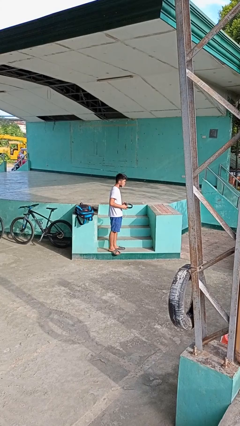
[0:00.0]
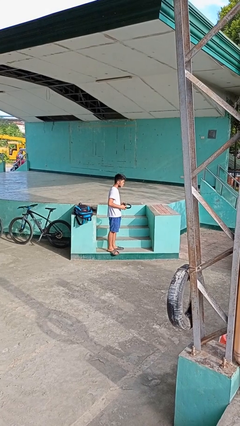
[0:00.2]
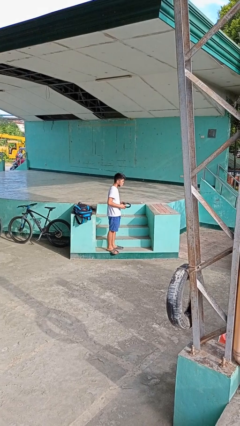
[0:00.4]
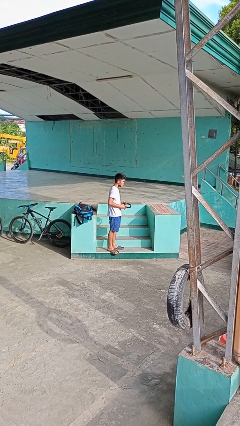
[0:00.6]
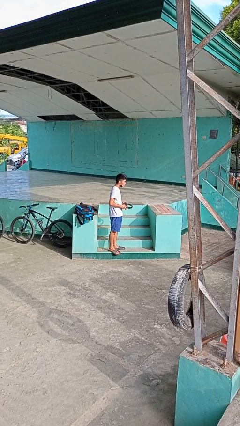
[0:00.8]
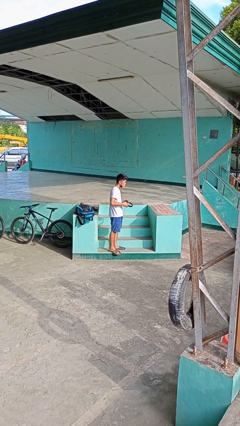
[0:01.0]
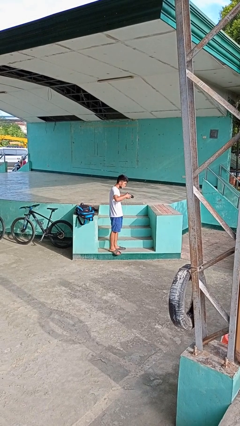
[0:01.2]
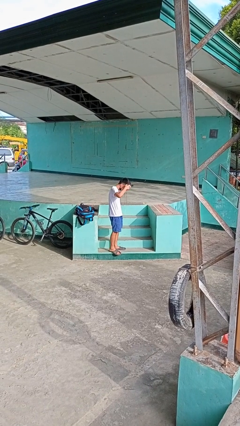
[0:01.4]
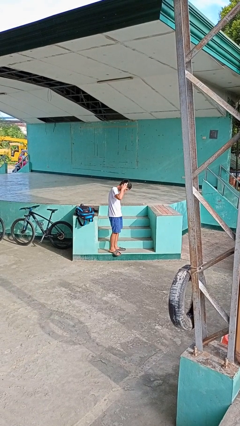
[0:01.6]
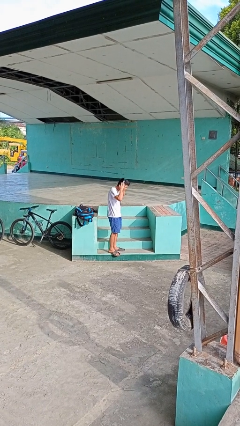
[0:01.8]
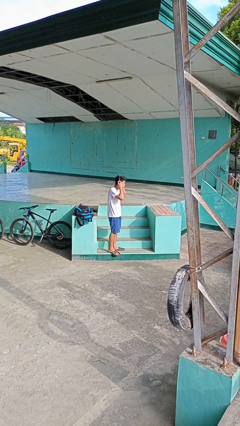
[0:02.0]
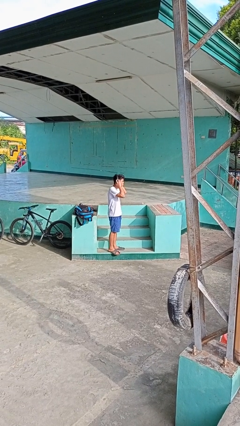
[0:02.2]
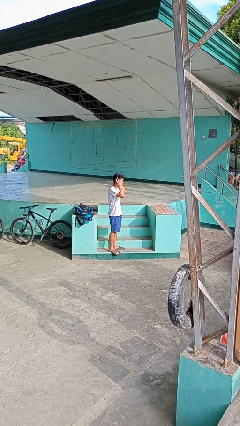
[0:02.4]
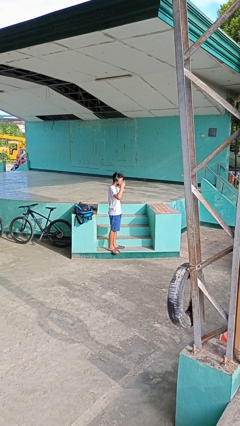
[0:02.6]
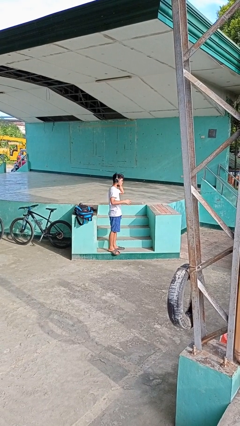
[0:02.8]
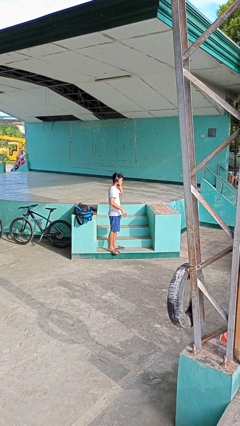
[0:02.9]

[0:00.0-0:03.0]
person puts on headphones

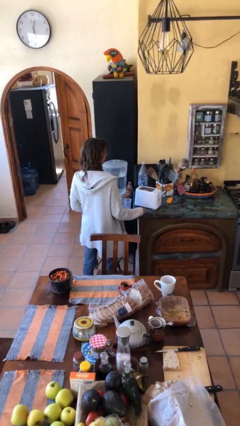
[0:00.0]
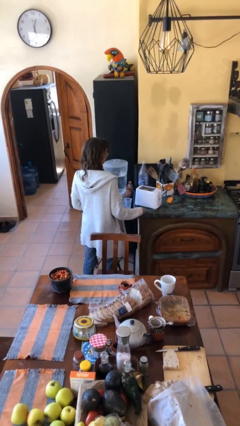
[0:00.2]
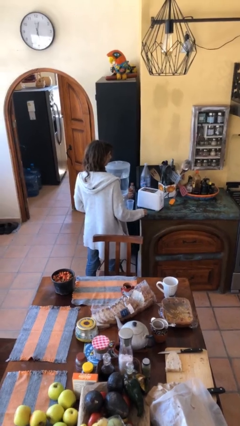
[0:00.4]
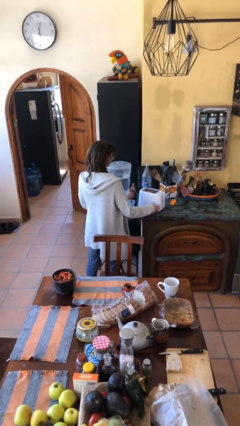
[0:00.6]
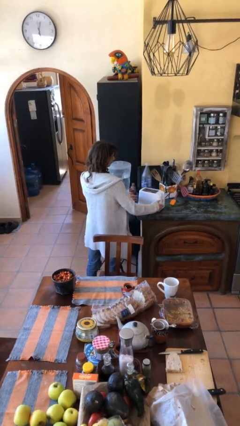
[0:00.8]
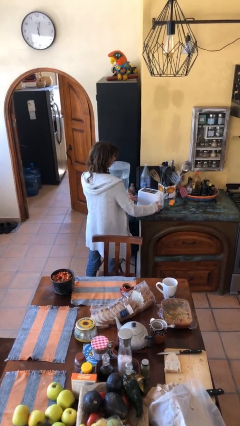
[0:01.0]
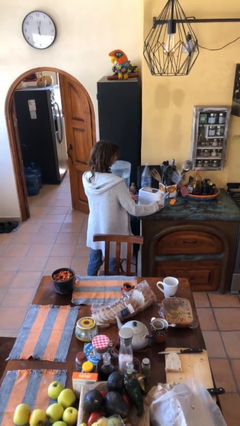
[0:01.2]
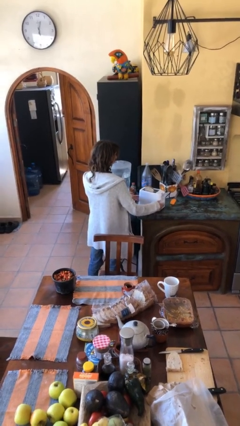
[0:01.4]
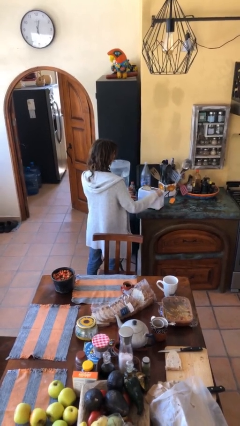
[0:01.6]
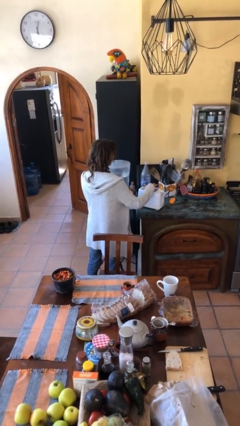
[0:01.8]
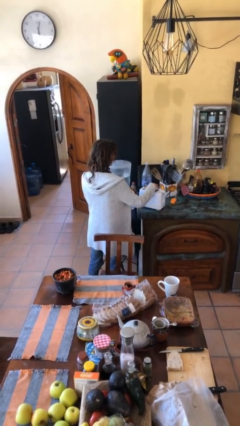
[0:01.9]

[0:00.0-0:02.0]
person takes object from toaster

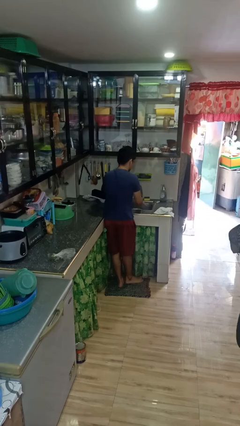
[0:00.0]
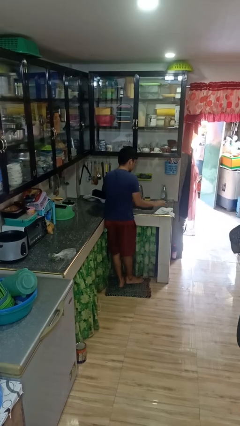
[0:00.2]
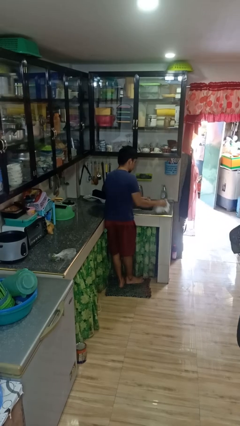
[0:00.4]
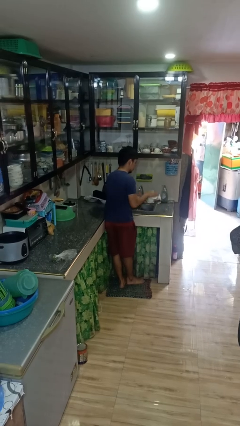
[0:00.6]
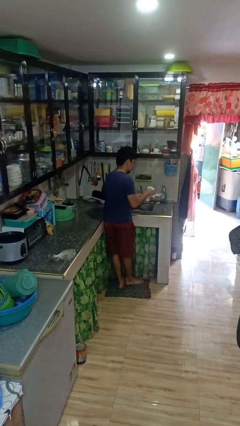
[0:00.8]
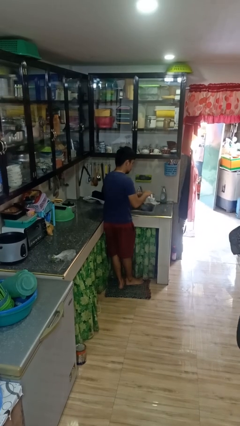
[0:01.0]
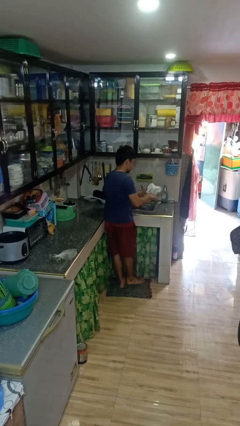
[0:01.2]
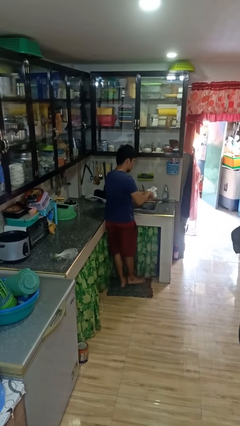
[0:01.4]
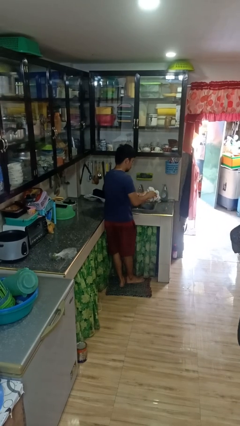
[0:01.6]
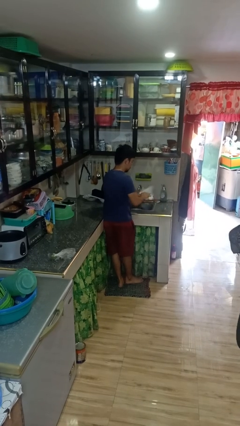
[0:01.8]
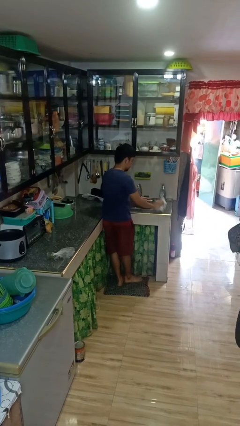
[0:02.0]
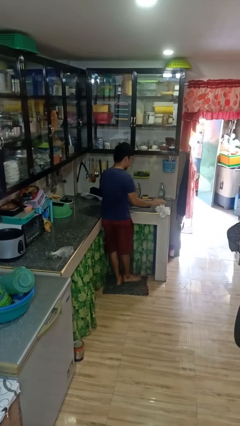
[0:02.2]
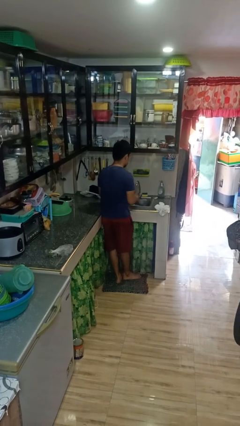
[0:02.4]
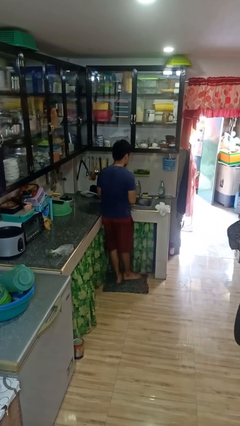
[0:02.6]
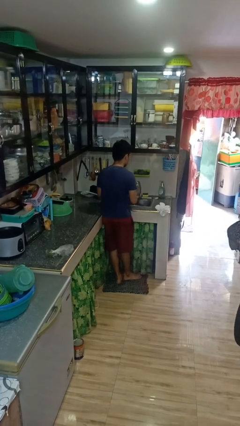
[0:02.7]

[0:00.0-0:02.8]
person dries hands with towel

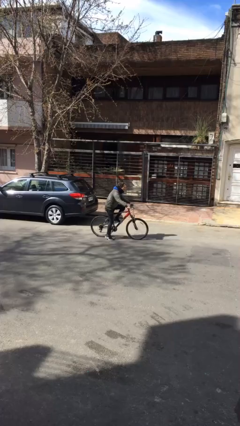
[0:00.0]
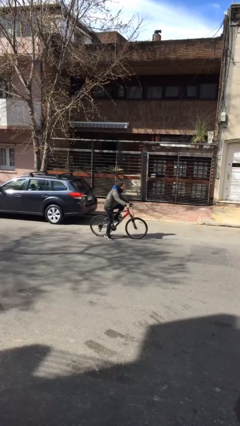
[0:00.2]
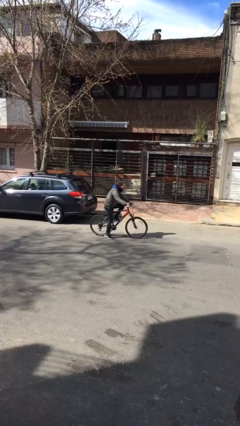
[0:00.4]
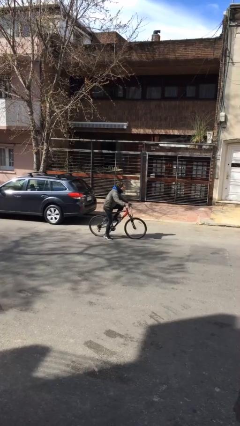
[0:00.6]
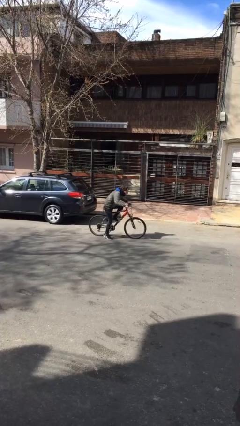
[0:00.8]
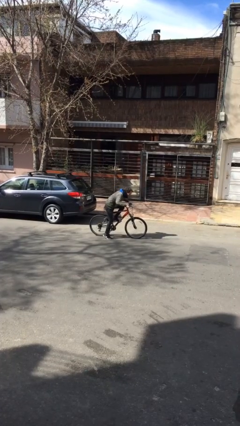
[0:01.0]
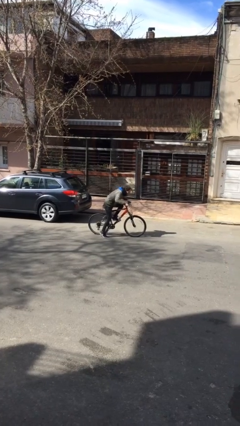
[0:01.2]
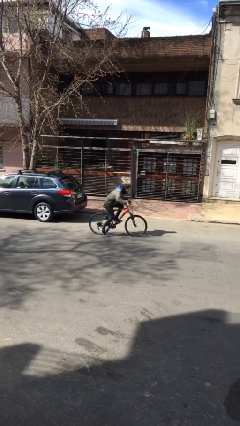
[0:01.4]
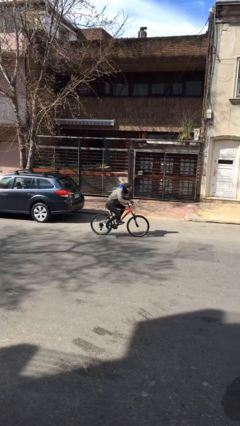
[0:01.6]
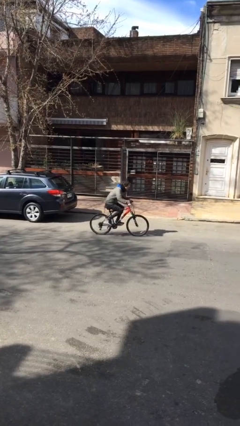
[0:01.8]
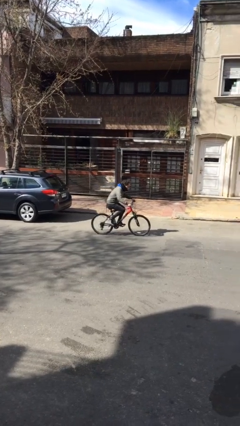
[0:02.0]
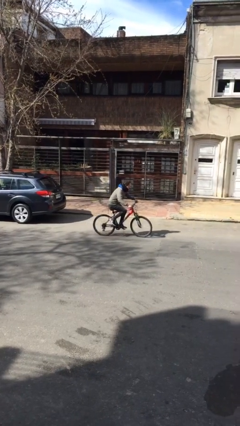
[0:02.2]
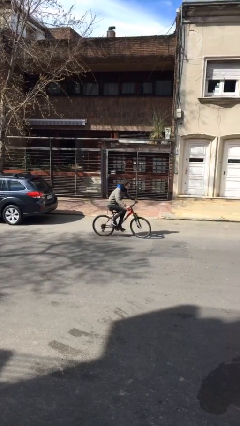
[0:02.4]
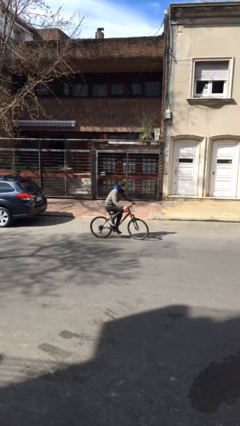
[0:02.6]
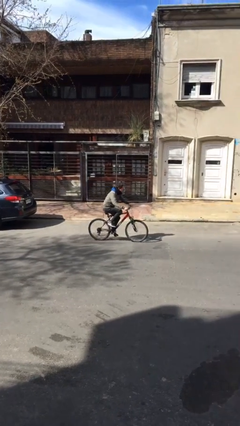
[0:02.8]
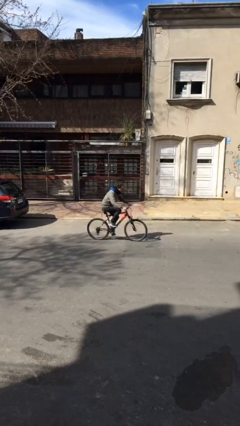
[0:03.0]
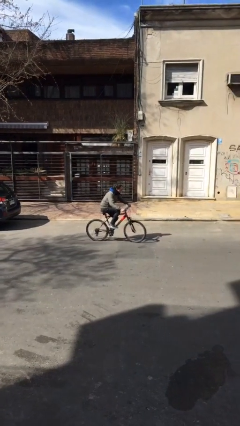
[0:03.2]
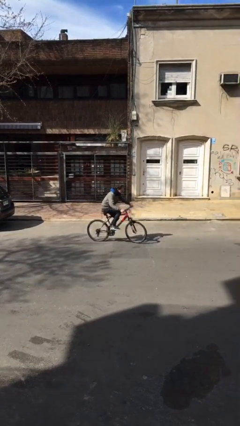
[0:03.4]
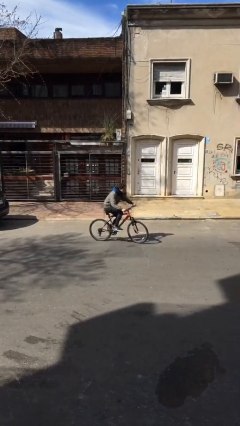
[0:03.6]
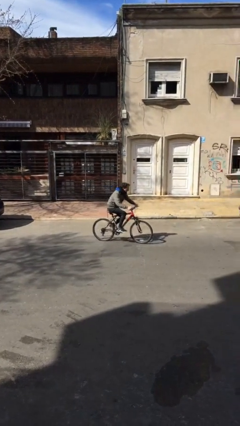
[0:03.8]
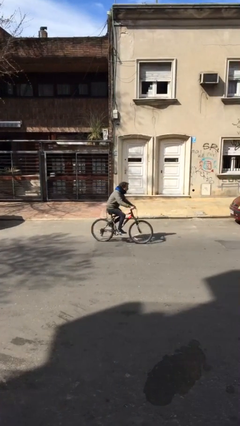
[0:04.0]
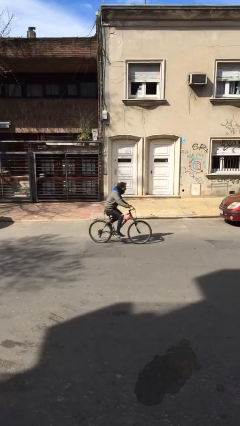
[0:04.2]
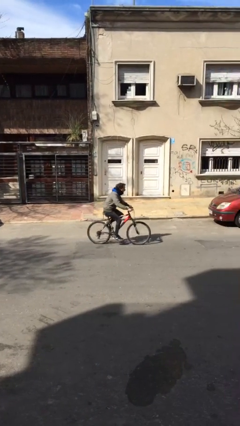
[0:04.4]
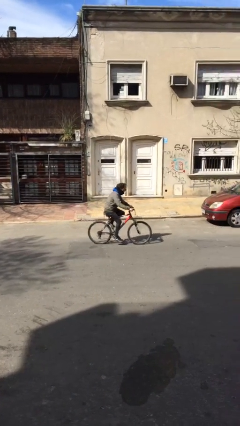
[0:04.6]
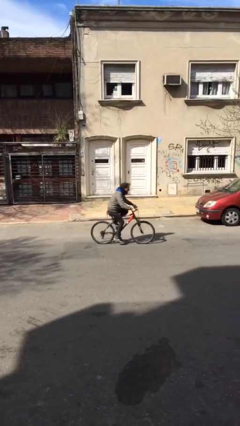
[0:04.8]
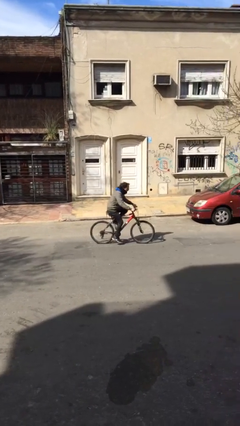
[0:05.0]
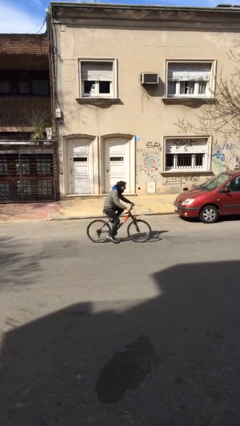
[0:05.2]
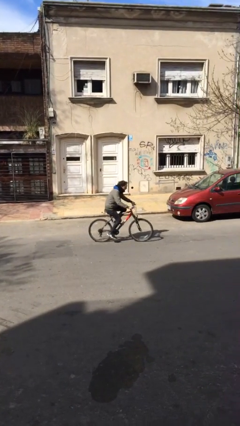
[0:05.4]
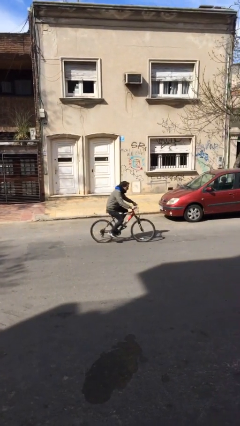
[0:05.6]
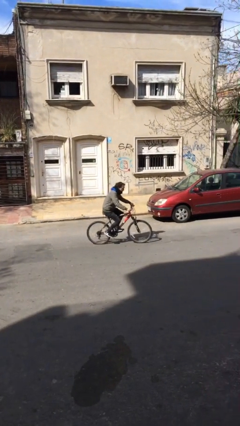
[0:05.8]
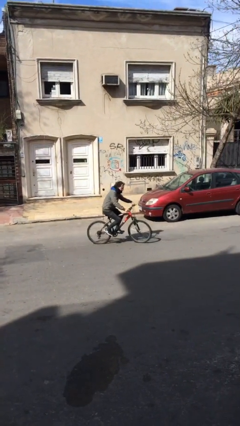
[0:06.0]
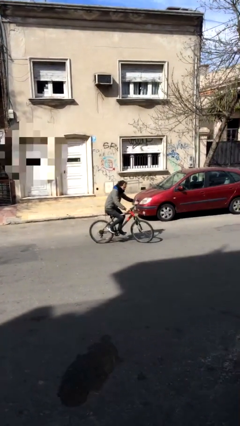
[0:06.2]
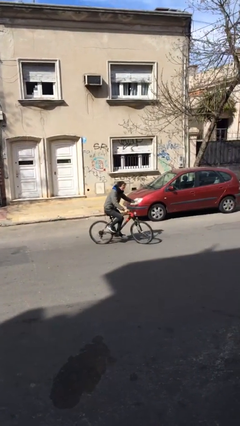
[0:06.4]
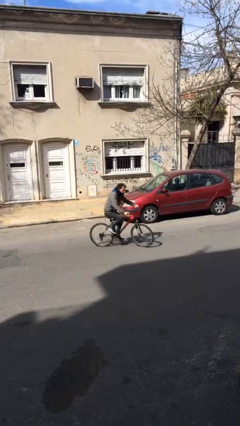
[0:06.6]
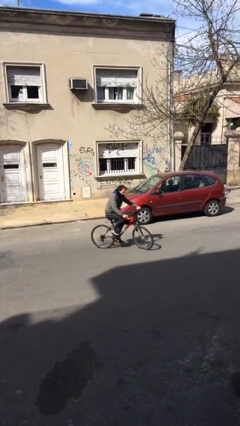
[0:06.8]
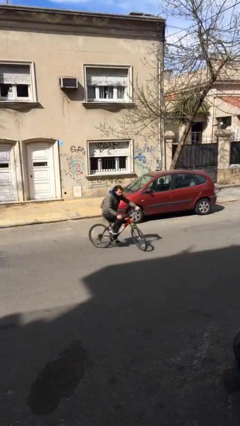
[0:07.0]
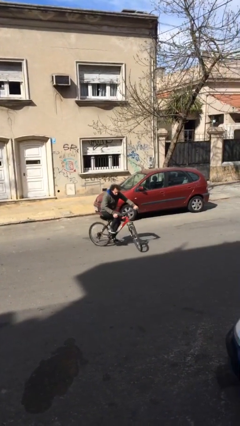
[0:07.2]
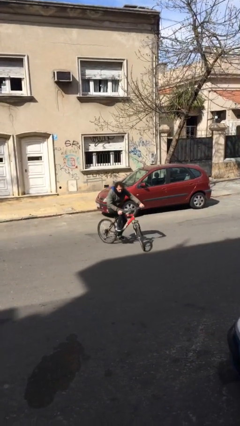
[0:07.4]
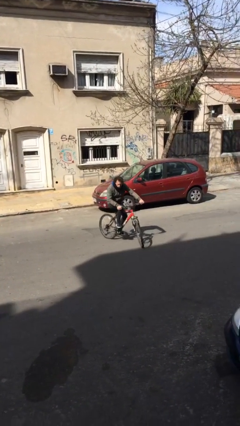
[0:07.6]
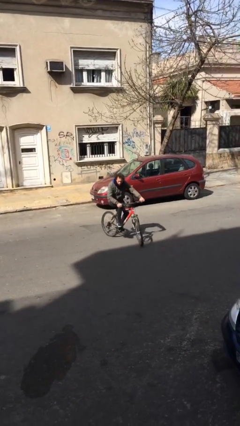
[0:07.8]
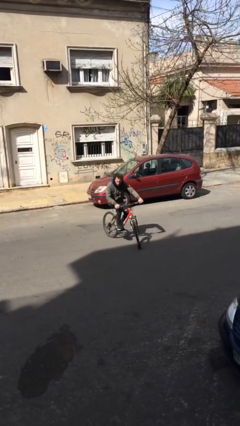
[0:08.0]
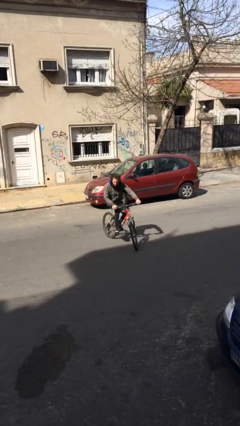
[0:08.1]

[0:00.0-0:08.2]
person rides bicycle

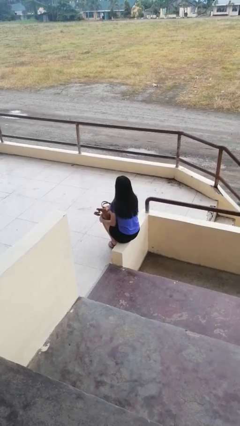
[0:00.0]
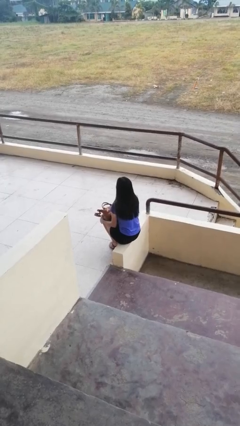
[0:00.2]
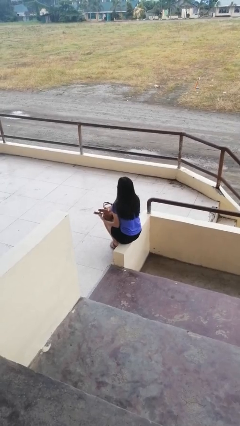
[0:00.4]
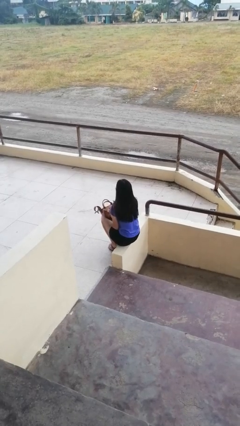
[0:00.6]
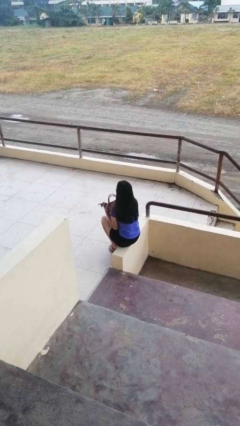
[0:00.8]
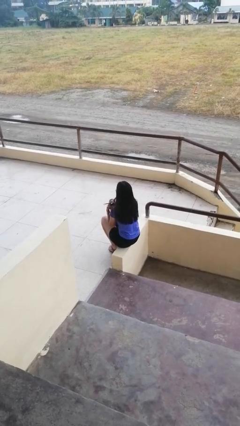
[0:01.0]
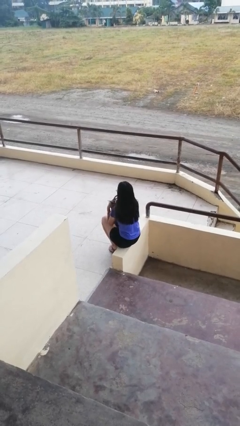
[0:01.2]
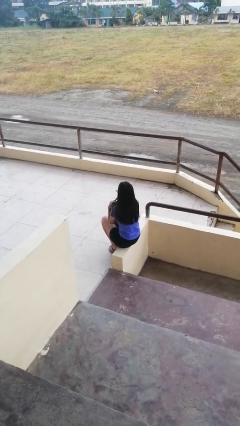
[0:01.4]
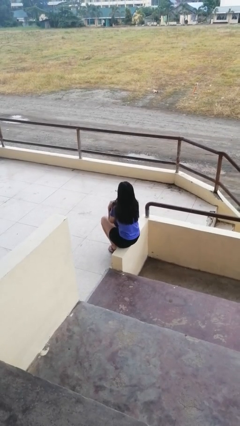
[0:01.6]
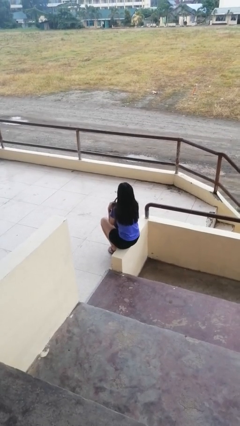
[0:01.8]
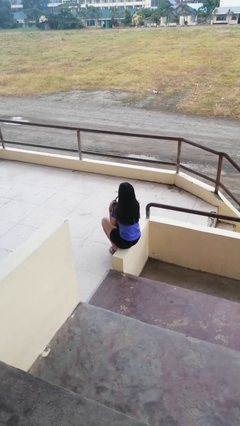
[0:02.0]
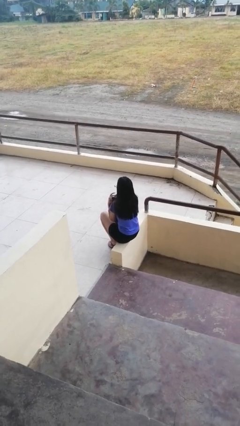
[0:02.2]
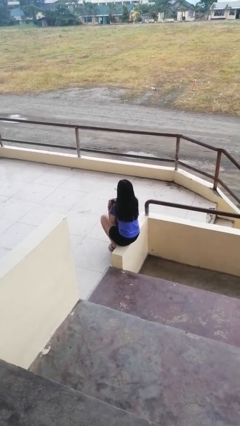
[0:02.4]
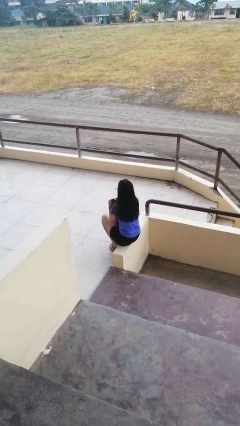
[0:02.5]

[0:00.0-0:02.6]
person squeezes object
